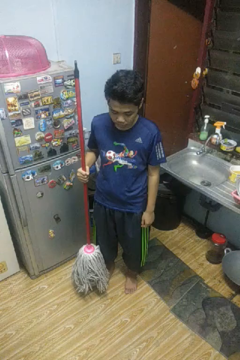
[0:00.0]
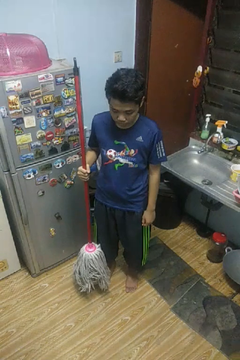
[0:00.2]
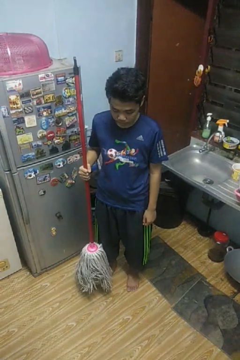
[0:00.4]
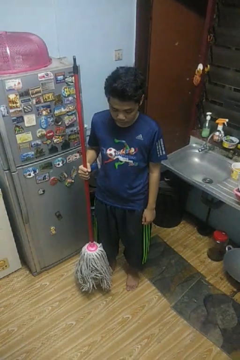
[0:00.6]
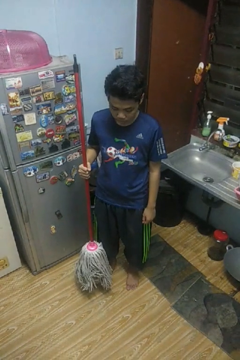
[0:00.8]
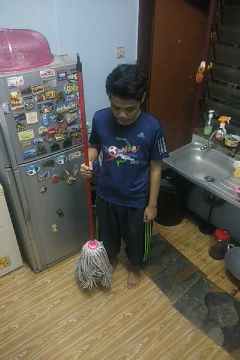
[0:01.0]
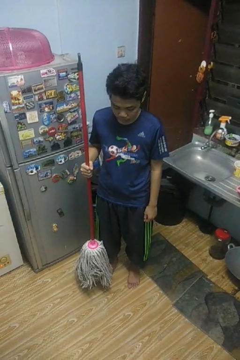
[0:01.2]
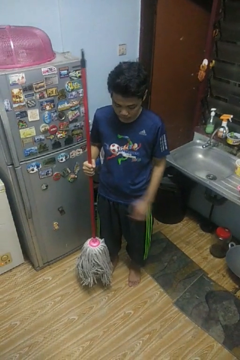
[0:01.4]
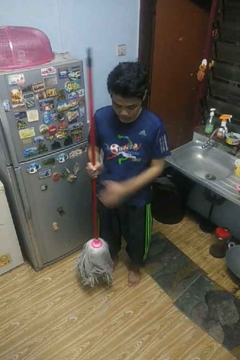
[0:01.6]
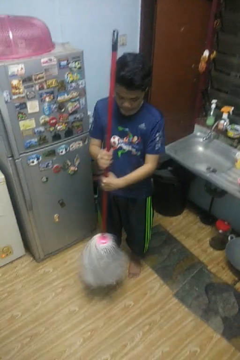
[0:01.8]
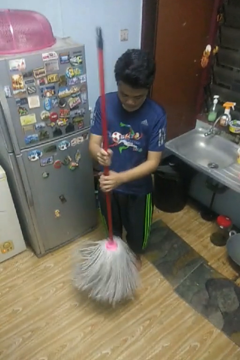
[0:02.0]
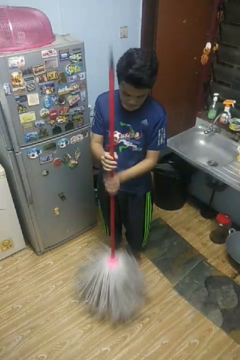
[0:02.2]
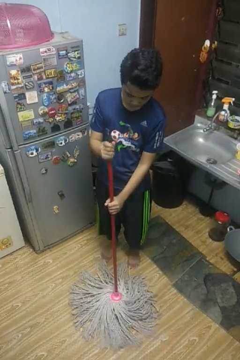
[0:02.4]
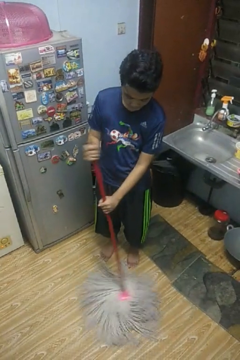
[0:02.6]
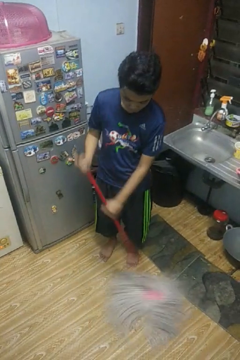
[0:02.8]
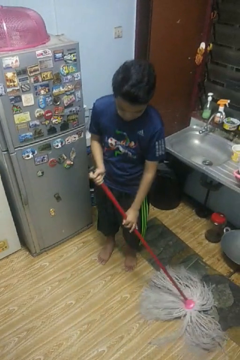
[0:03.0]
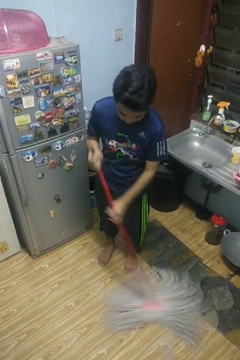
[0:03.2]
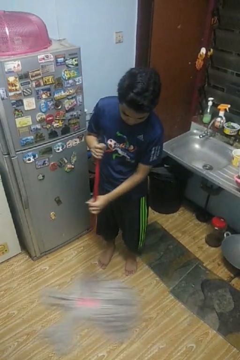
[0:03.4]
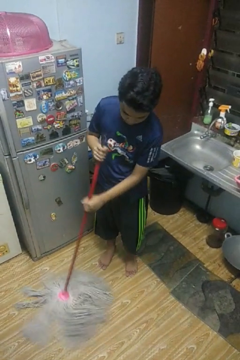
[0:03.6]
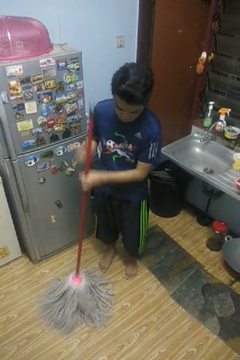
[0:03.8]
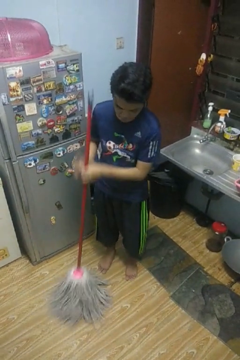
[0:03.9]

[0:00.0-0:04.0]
person mops

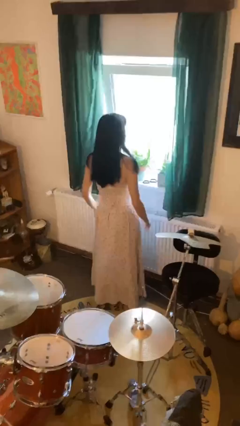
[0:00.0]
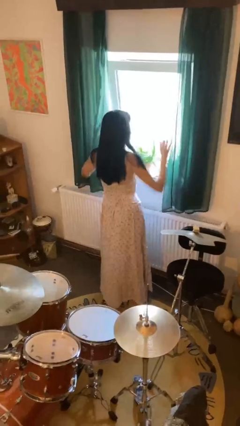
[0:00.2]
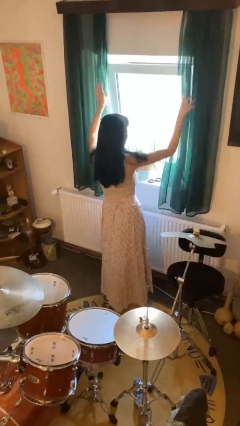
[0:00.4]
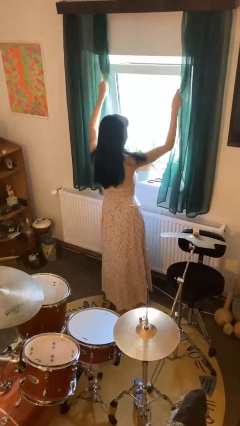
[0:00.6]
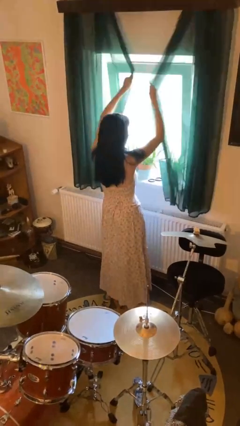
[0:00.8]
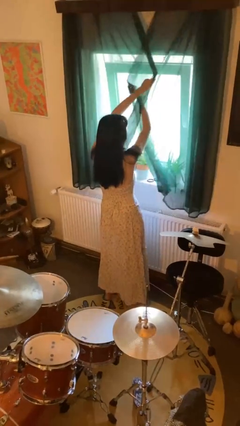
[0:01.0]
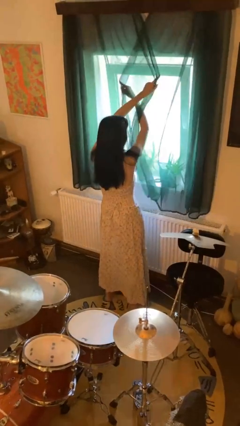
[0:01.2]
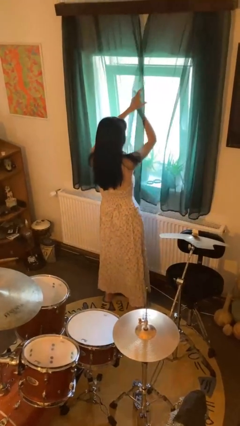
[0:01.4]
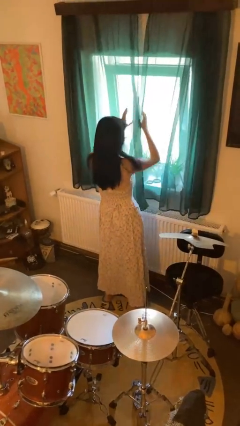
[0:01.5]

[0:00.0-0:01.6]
person closes curtains

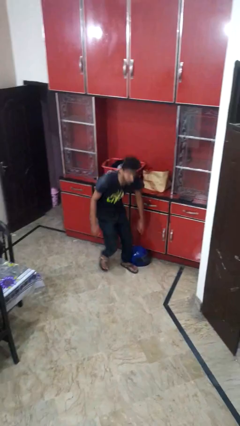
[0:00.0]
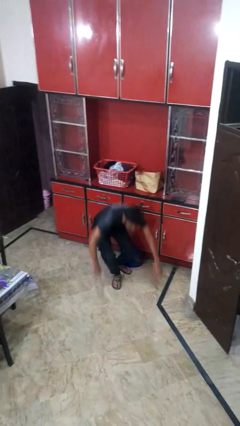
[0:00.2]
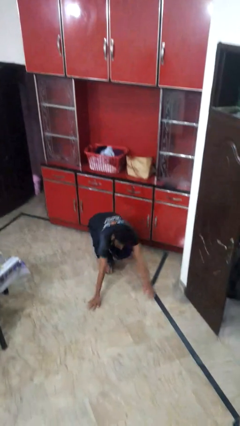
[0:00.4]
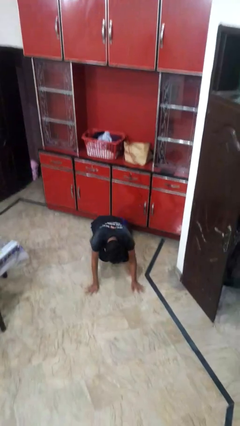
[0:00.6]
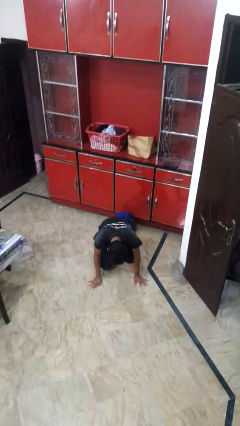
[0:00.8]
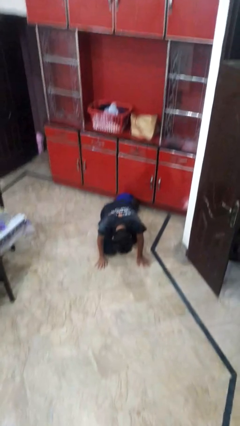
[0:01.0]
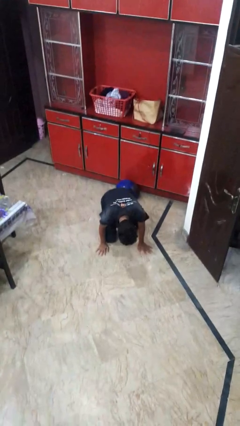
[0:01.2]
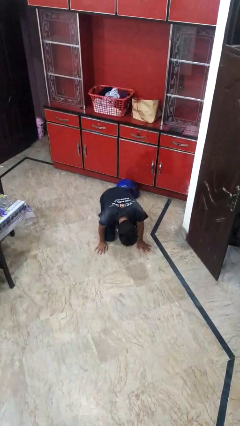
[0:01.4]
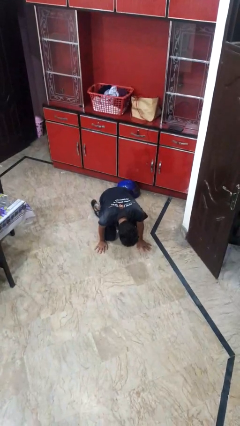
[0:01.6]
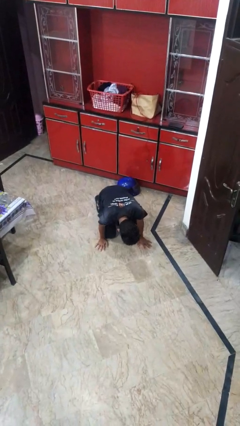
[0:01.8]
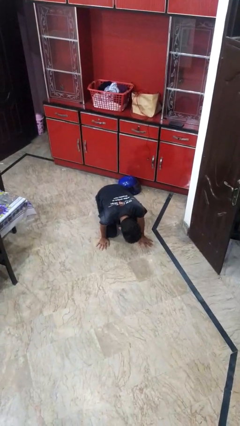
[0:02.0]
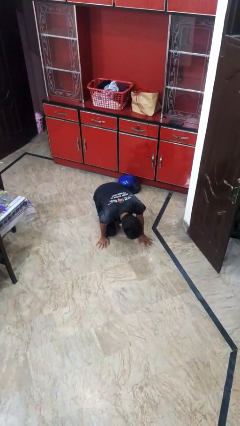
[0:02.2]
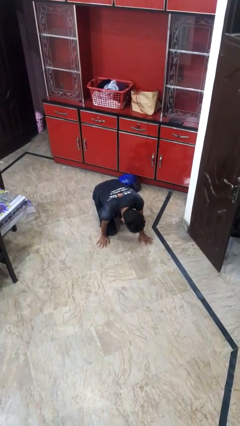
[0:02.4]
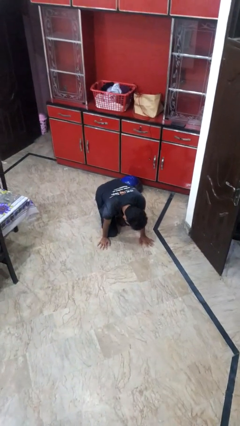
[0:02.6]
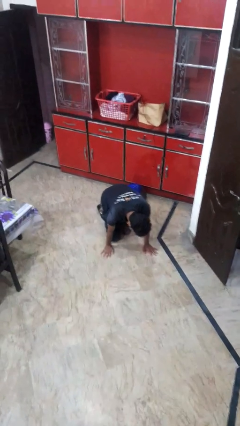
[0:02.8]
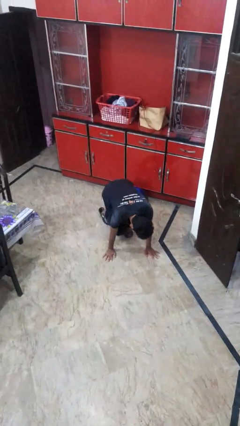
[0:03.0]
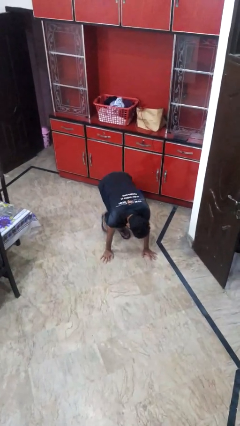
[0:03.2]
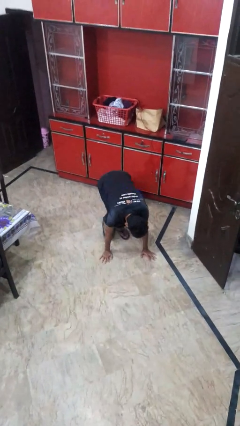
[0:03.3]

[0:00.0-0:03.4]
person trips on object on floor

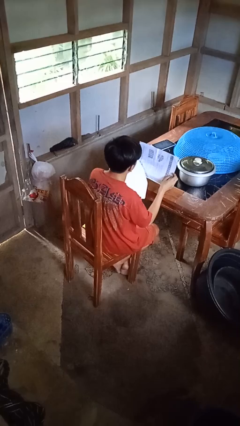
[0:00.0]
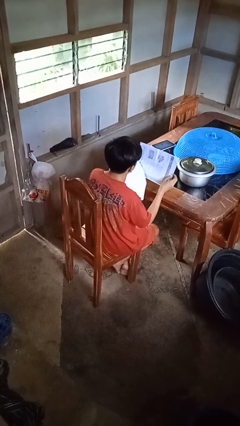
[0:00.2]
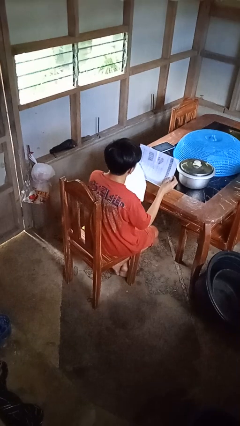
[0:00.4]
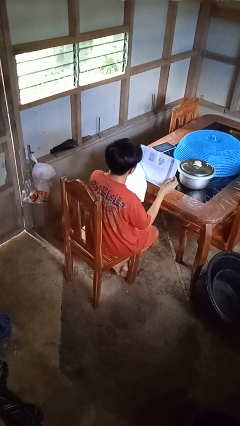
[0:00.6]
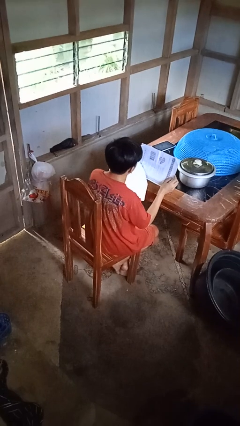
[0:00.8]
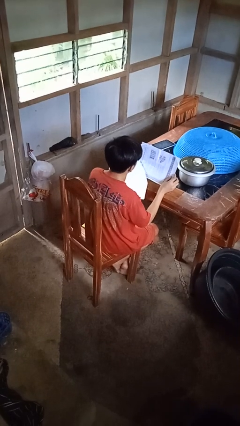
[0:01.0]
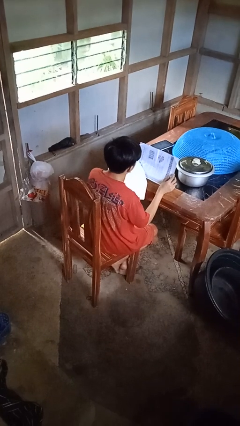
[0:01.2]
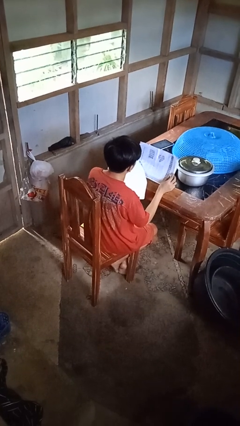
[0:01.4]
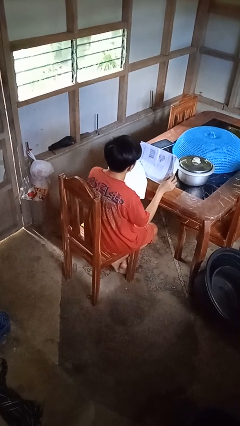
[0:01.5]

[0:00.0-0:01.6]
person reads newspaper

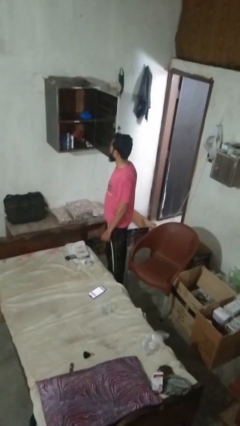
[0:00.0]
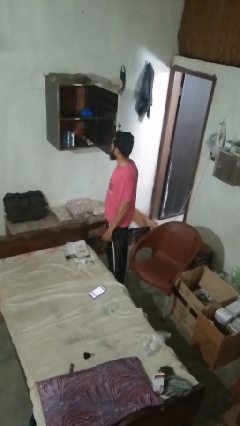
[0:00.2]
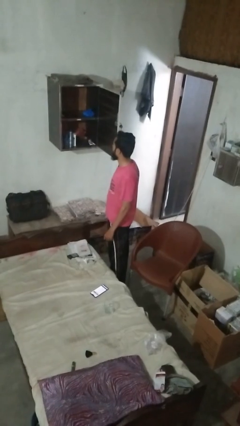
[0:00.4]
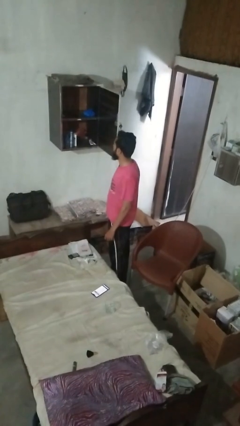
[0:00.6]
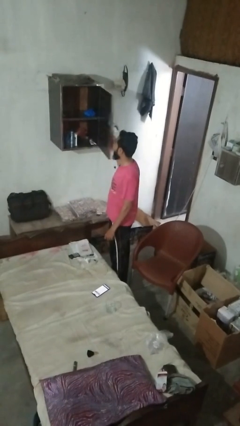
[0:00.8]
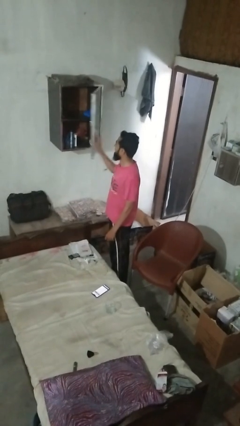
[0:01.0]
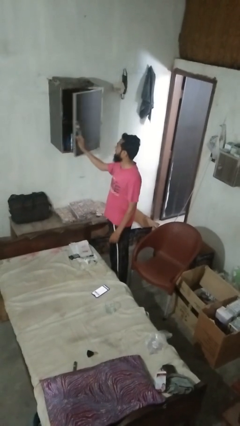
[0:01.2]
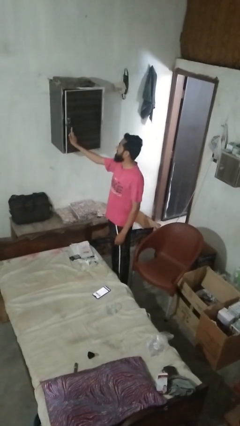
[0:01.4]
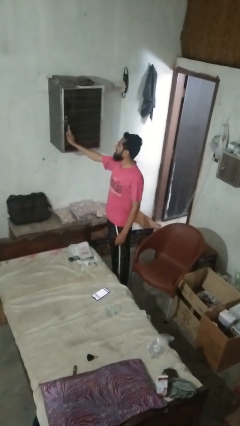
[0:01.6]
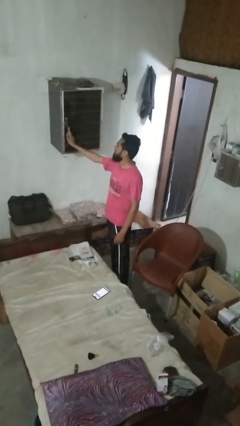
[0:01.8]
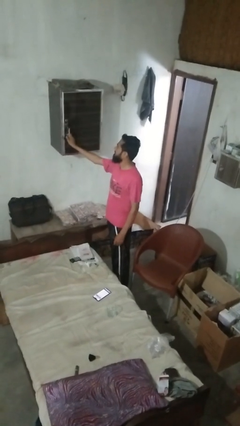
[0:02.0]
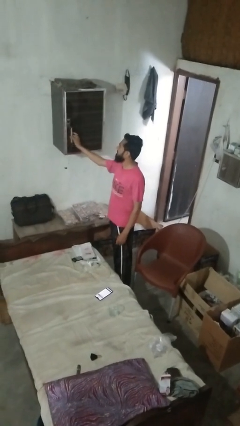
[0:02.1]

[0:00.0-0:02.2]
person closes dresser drawer

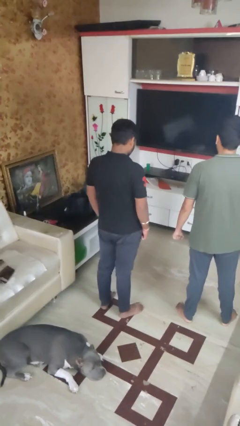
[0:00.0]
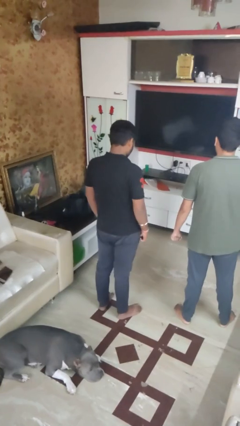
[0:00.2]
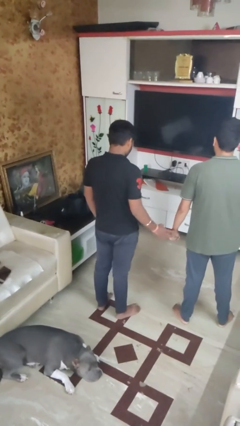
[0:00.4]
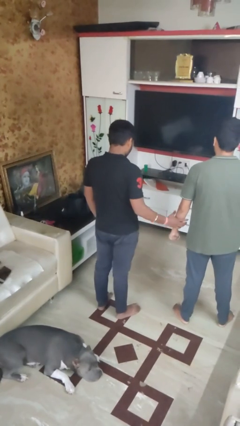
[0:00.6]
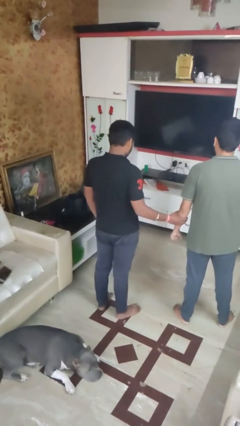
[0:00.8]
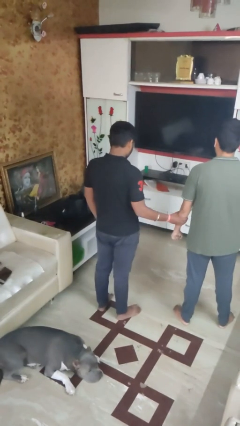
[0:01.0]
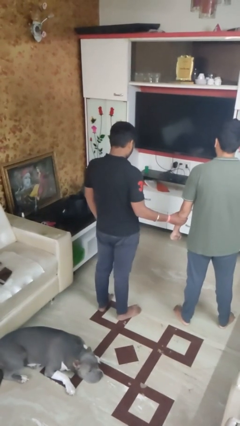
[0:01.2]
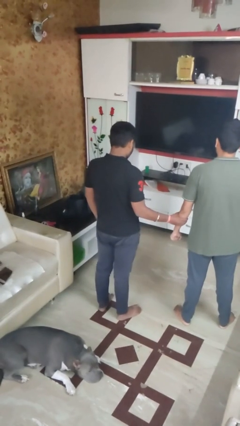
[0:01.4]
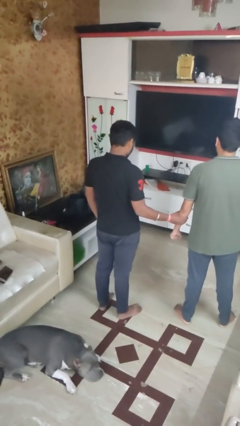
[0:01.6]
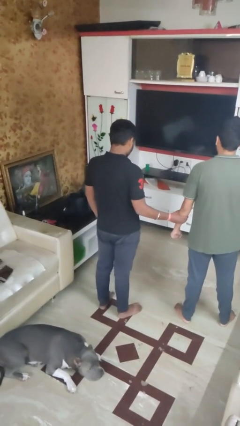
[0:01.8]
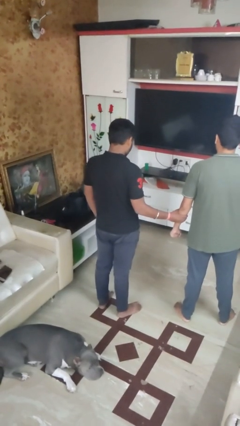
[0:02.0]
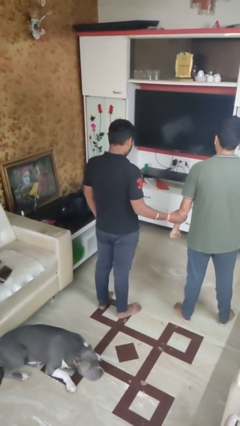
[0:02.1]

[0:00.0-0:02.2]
person grabs person by forearm

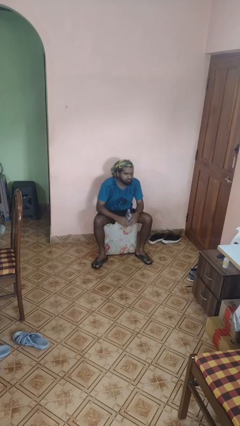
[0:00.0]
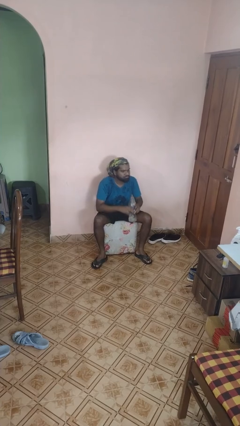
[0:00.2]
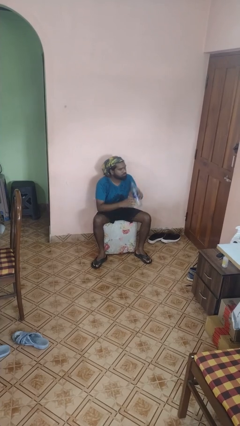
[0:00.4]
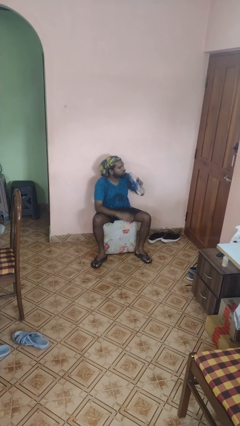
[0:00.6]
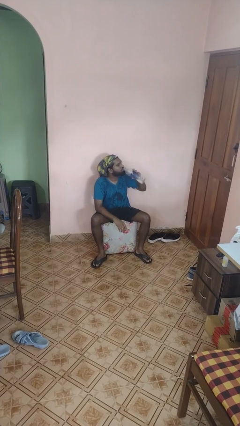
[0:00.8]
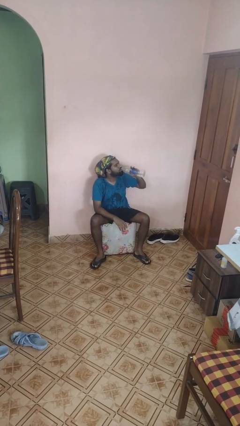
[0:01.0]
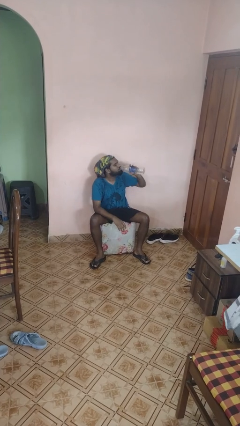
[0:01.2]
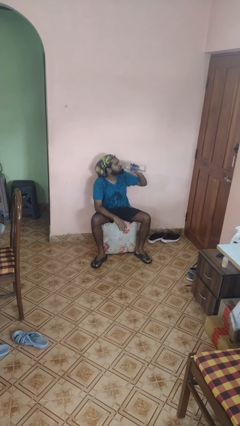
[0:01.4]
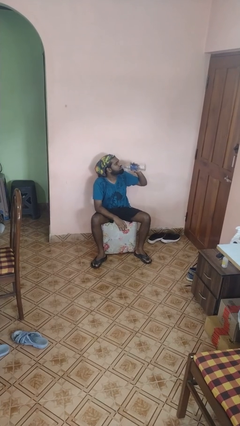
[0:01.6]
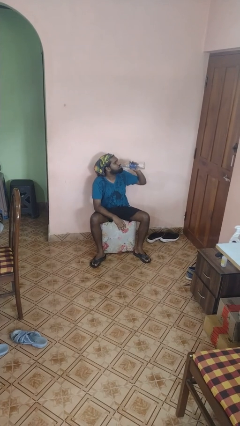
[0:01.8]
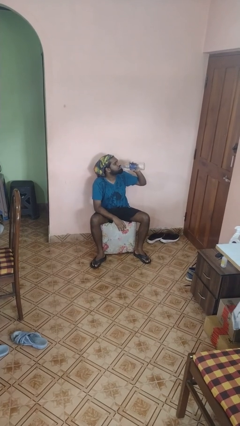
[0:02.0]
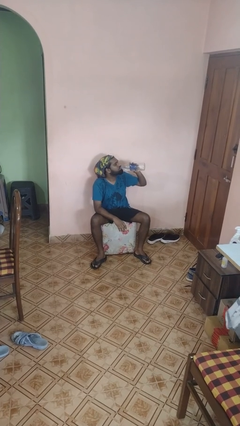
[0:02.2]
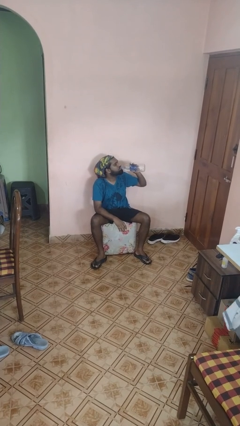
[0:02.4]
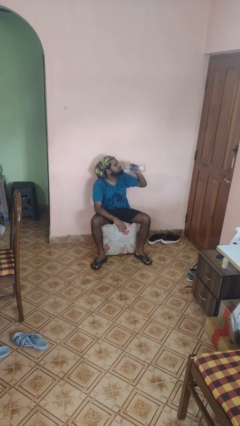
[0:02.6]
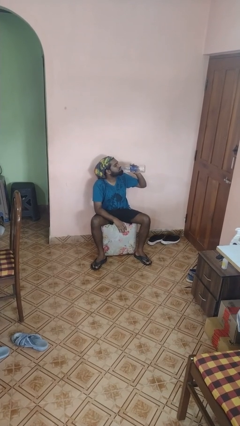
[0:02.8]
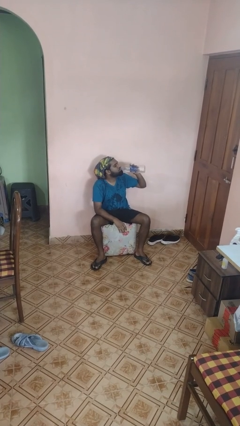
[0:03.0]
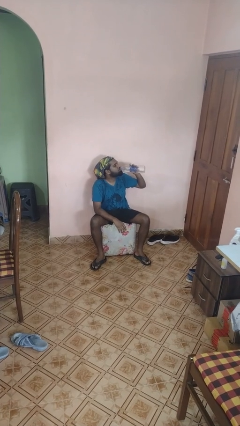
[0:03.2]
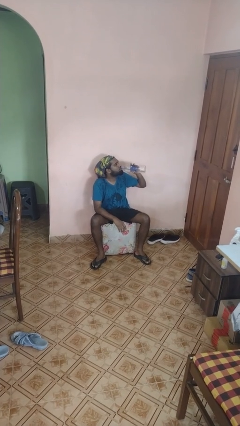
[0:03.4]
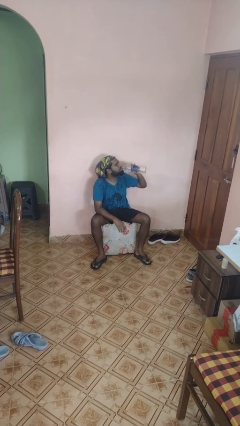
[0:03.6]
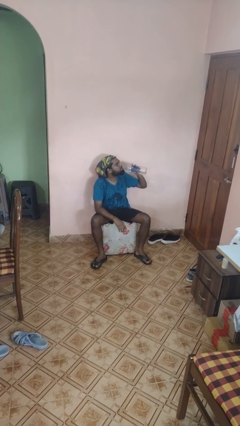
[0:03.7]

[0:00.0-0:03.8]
person drinks from bottle
